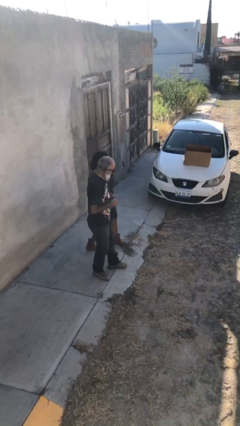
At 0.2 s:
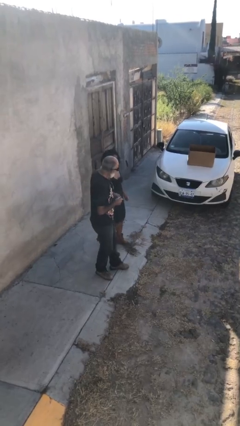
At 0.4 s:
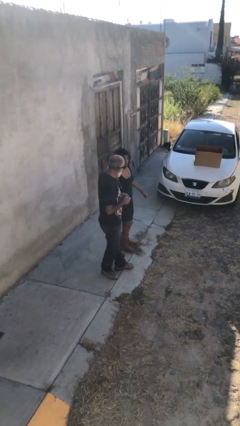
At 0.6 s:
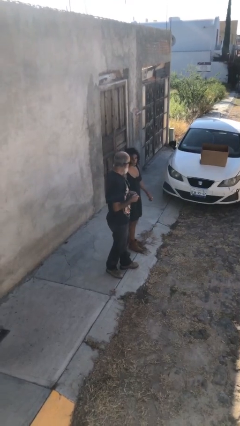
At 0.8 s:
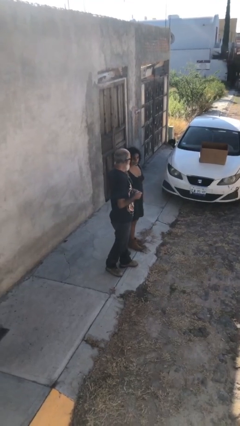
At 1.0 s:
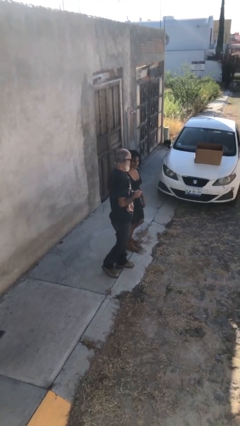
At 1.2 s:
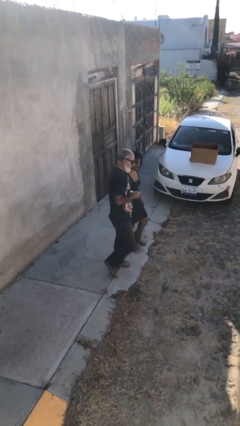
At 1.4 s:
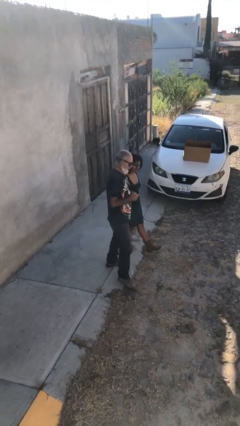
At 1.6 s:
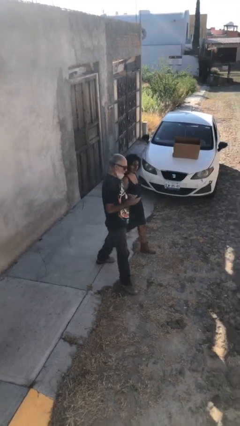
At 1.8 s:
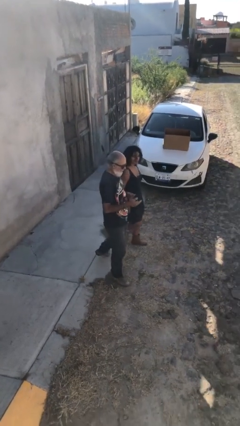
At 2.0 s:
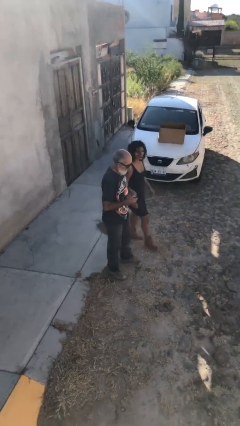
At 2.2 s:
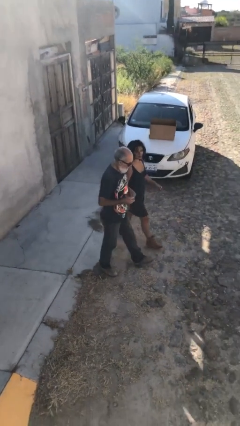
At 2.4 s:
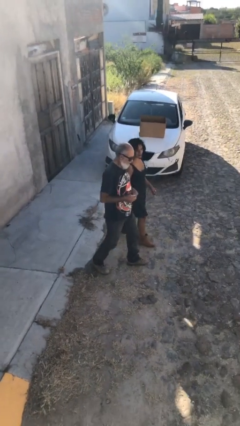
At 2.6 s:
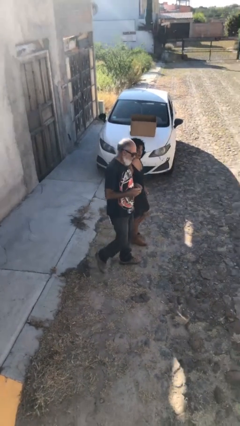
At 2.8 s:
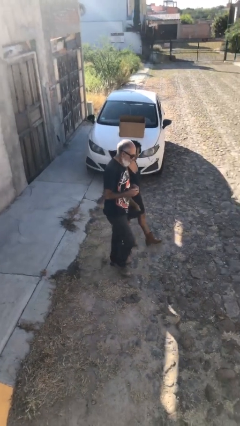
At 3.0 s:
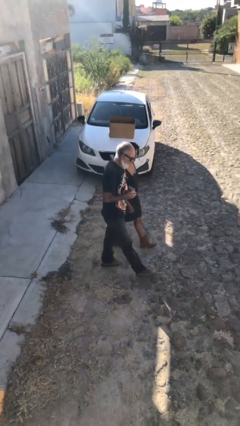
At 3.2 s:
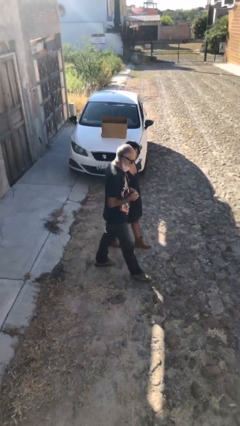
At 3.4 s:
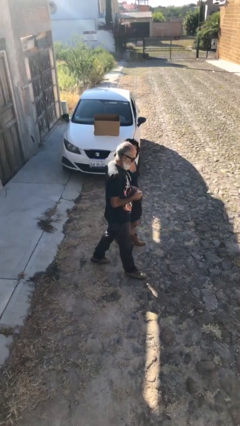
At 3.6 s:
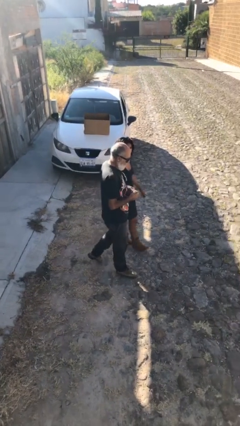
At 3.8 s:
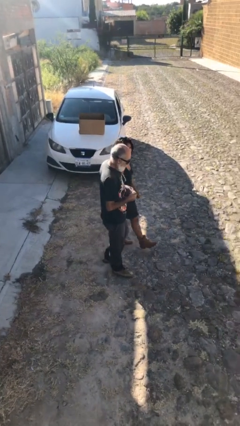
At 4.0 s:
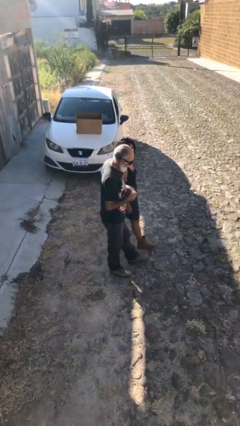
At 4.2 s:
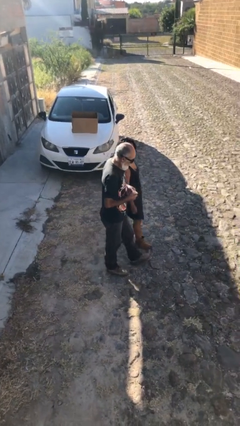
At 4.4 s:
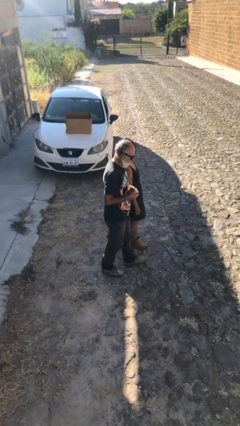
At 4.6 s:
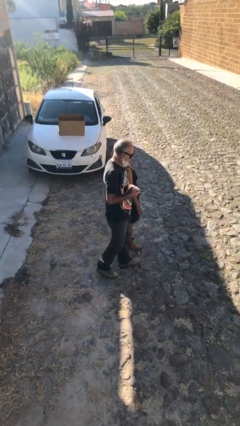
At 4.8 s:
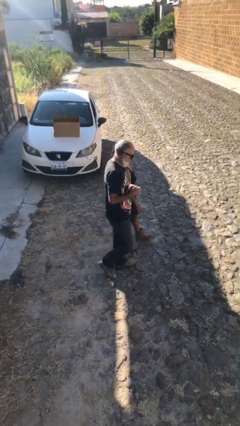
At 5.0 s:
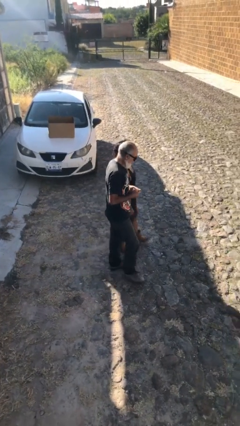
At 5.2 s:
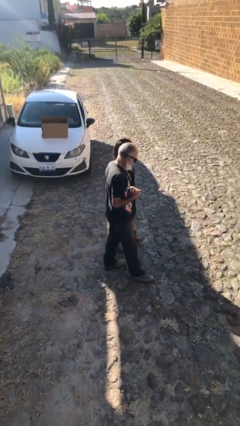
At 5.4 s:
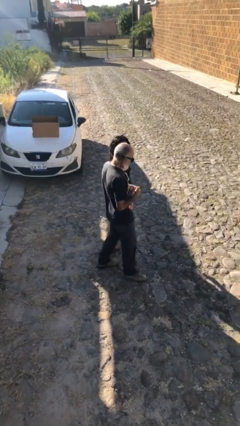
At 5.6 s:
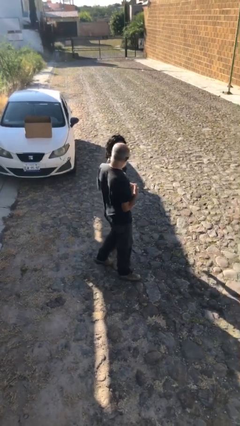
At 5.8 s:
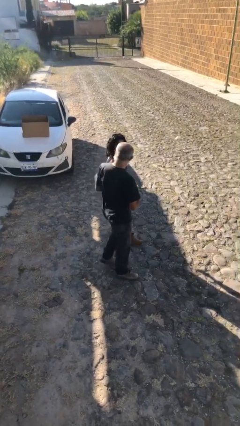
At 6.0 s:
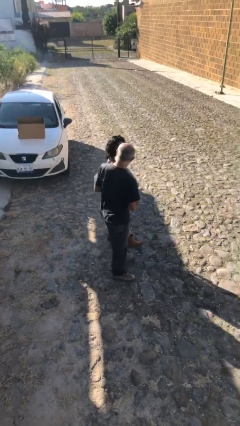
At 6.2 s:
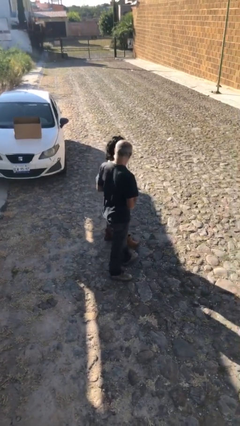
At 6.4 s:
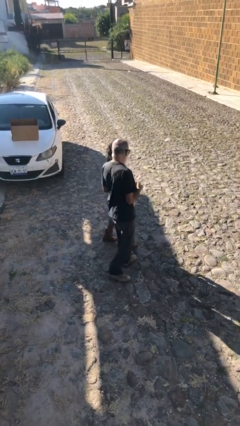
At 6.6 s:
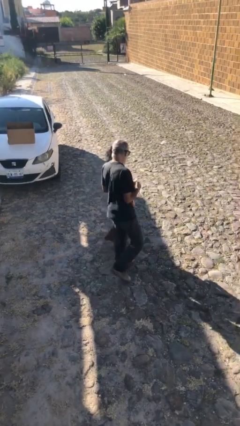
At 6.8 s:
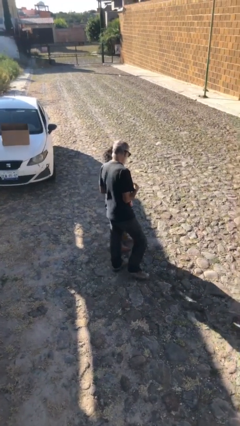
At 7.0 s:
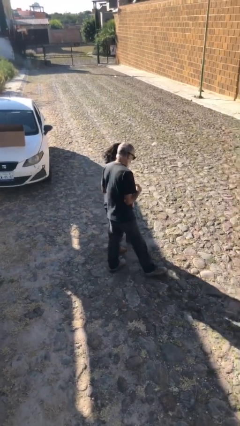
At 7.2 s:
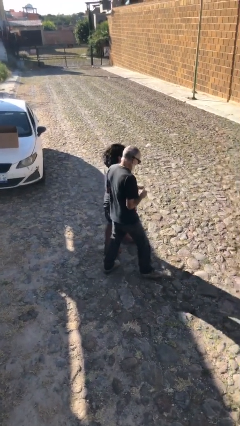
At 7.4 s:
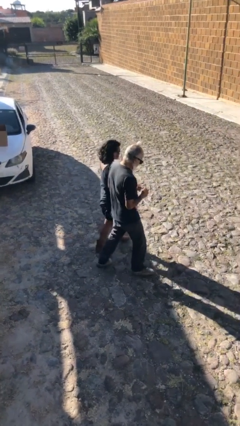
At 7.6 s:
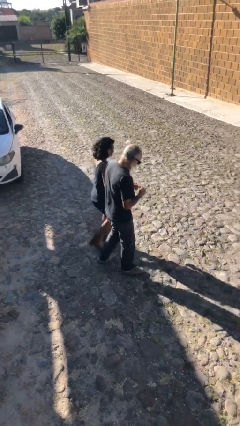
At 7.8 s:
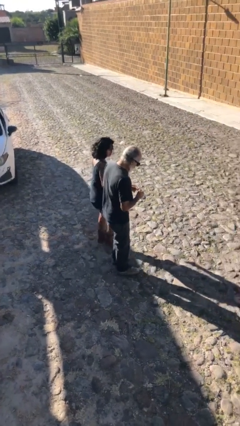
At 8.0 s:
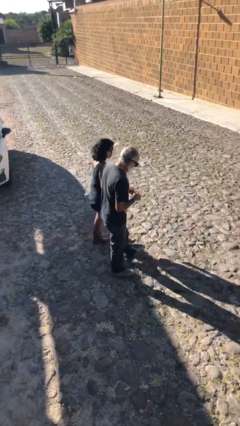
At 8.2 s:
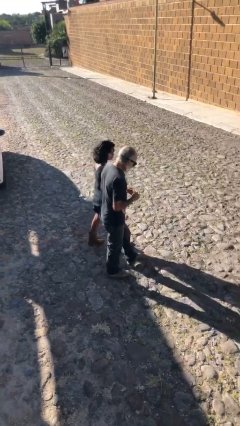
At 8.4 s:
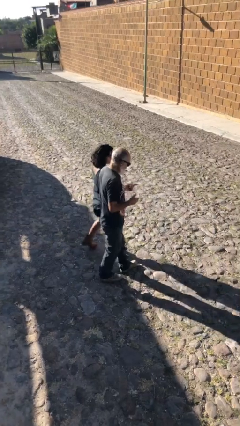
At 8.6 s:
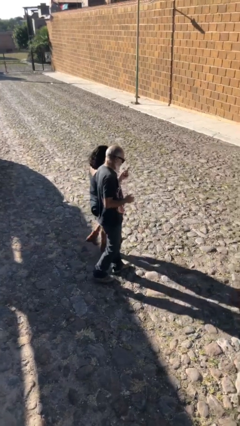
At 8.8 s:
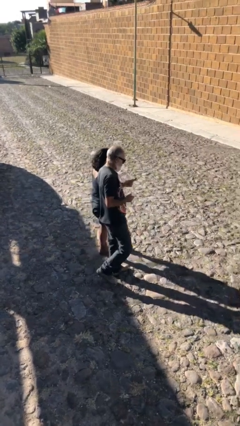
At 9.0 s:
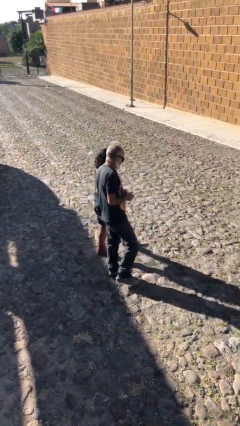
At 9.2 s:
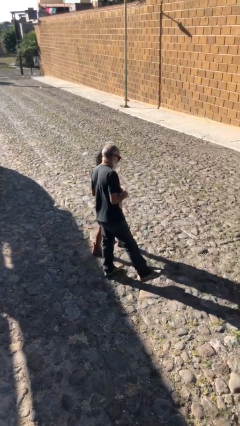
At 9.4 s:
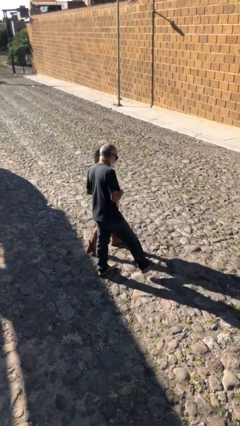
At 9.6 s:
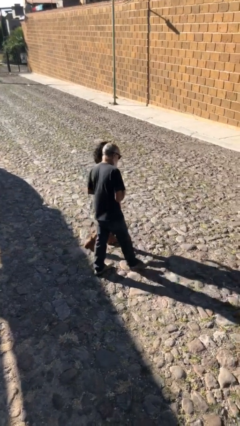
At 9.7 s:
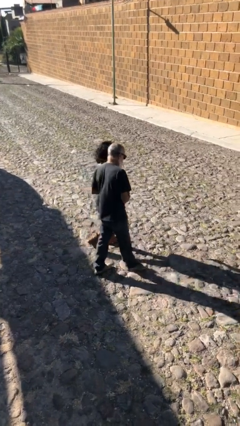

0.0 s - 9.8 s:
person talks to person

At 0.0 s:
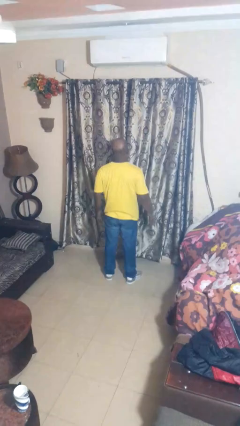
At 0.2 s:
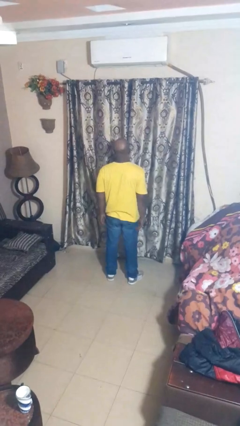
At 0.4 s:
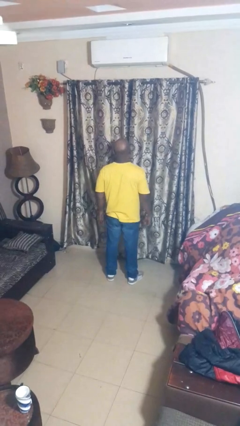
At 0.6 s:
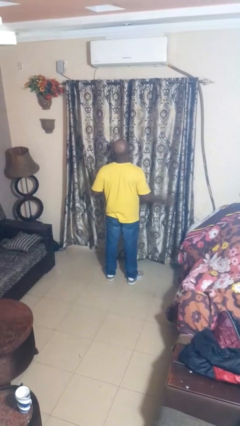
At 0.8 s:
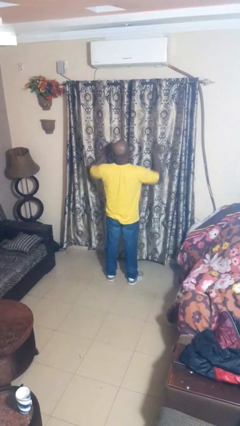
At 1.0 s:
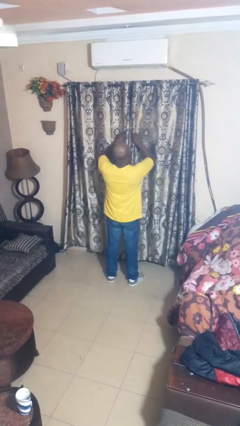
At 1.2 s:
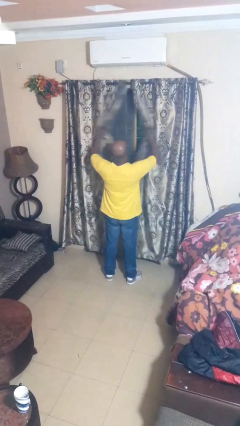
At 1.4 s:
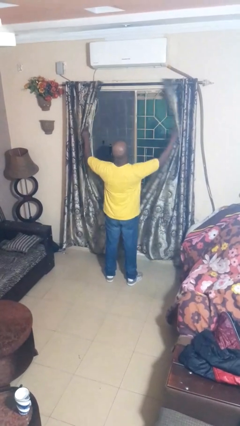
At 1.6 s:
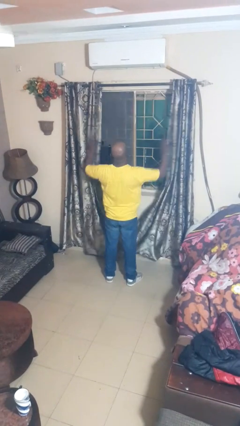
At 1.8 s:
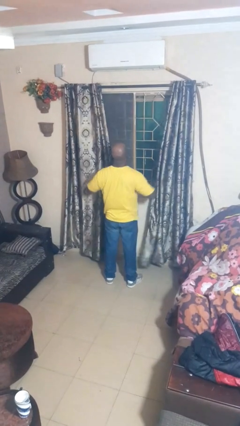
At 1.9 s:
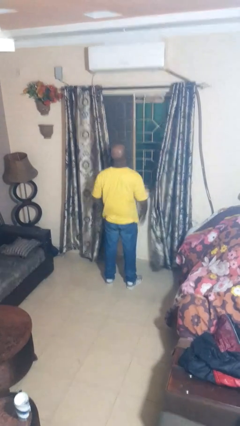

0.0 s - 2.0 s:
person opens curtains

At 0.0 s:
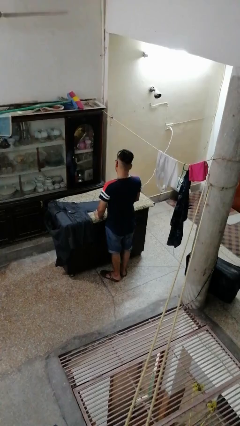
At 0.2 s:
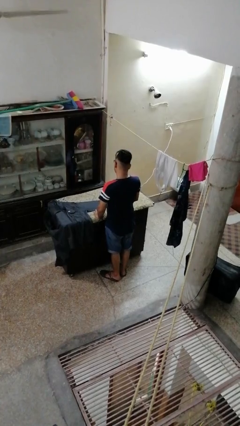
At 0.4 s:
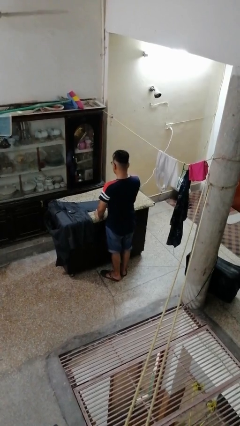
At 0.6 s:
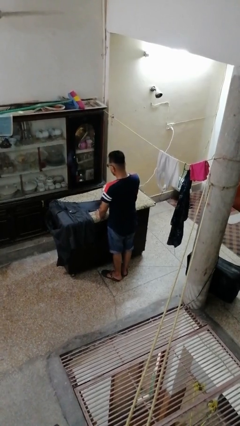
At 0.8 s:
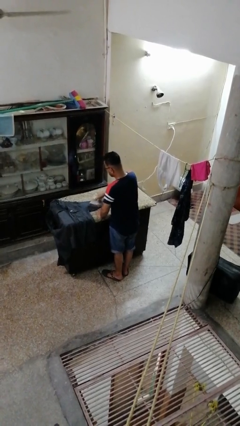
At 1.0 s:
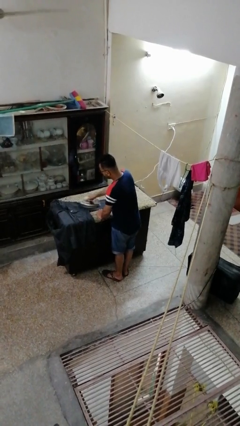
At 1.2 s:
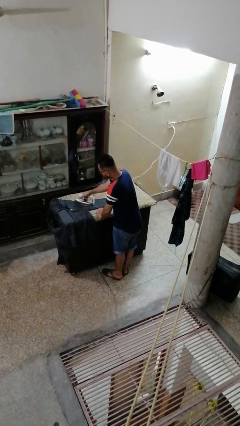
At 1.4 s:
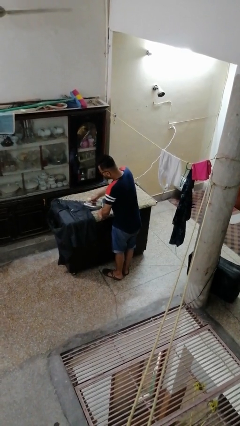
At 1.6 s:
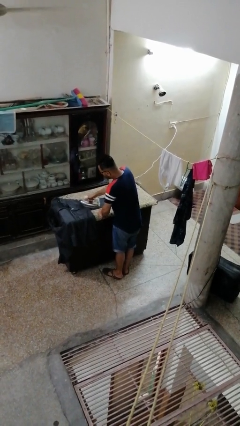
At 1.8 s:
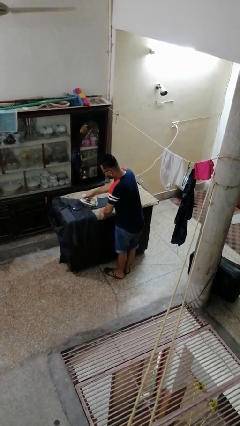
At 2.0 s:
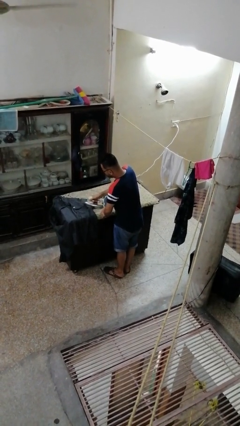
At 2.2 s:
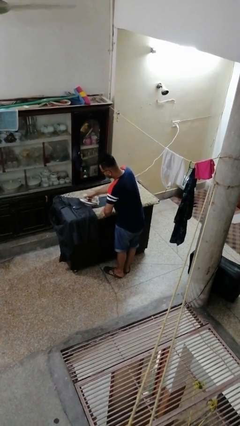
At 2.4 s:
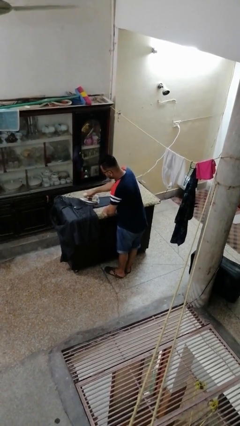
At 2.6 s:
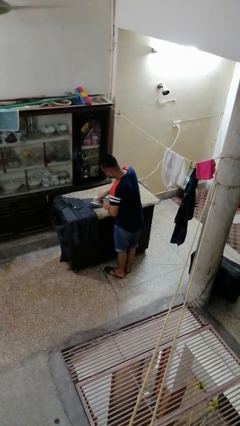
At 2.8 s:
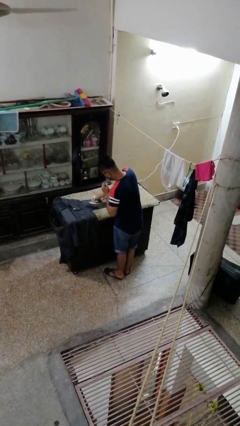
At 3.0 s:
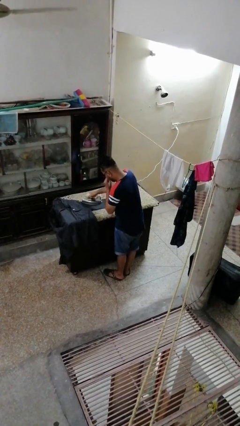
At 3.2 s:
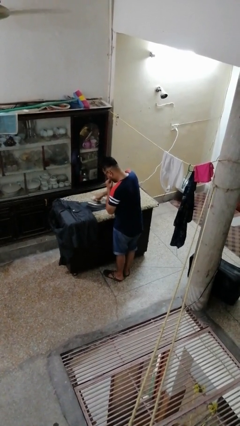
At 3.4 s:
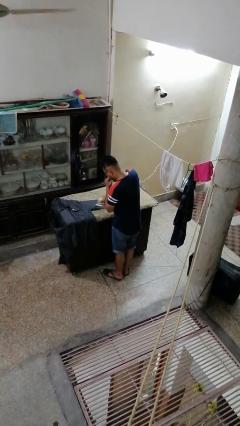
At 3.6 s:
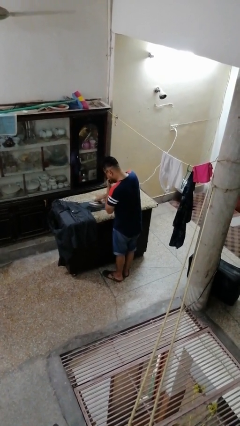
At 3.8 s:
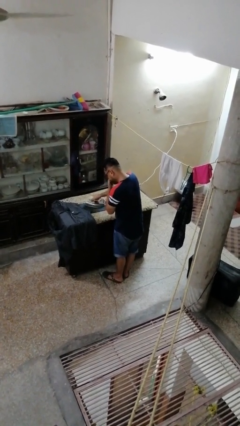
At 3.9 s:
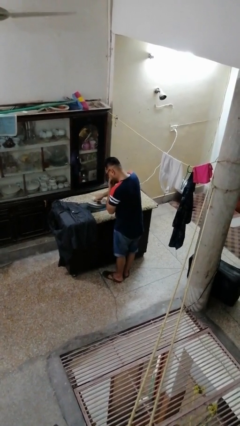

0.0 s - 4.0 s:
person irons clothes

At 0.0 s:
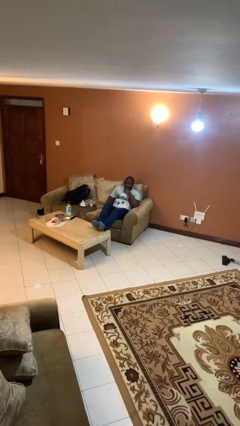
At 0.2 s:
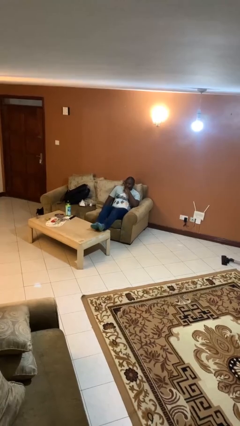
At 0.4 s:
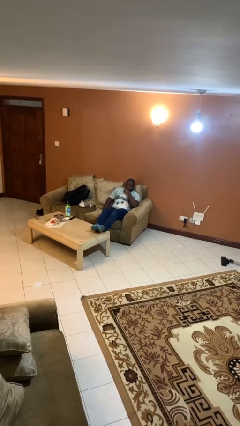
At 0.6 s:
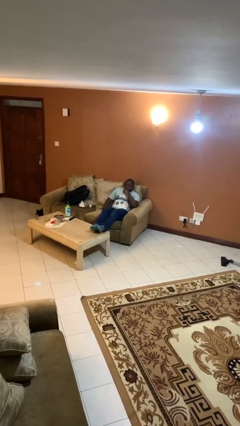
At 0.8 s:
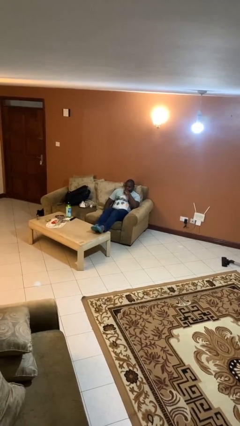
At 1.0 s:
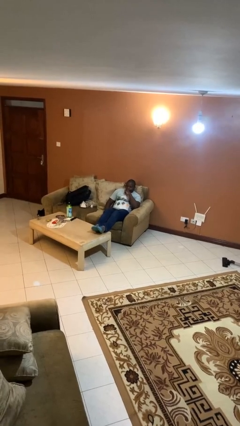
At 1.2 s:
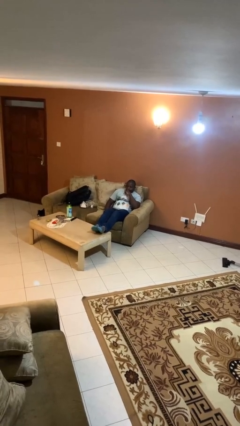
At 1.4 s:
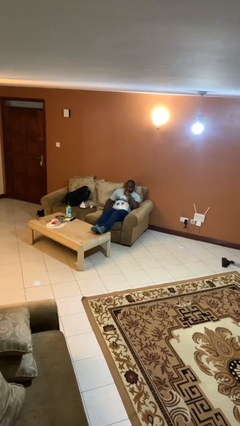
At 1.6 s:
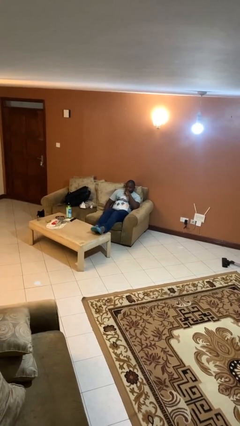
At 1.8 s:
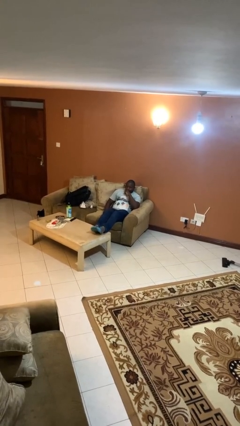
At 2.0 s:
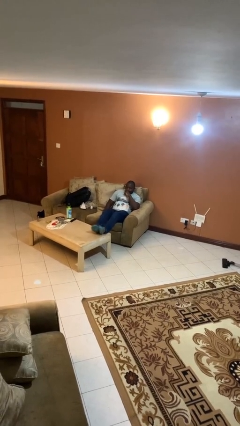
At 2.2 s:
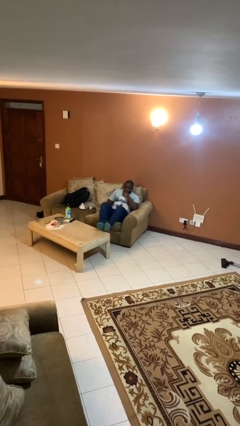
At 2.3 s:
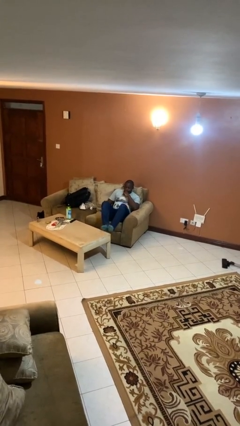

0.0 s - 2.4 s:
person puts feet up
